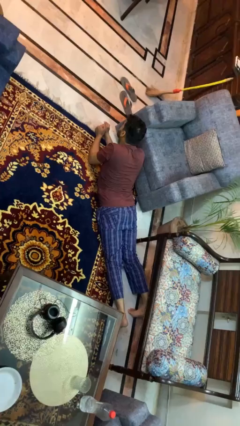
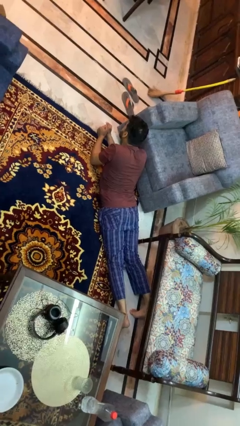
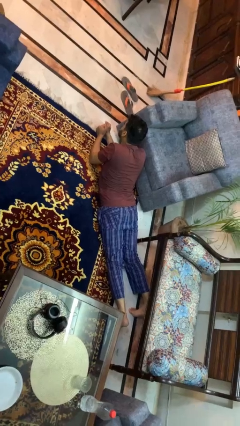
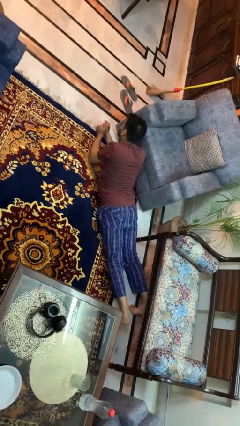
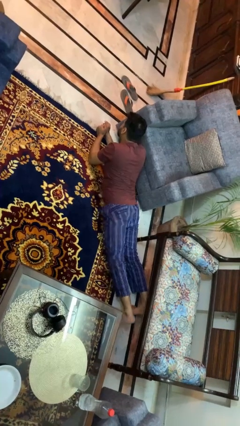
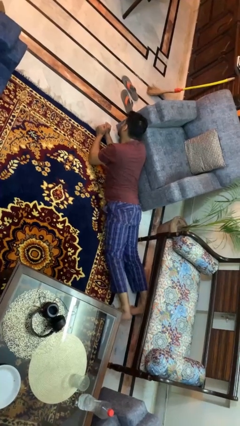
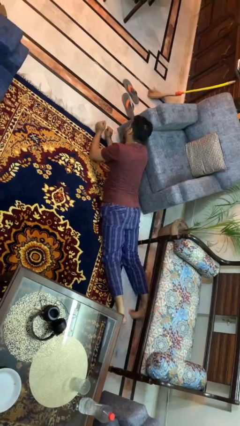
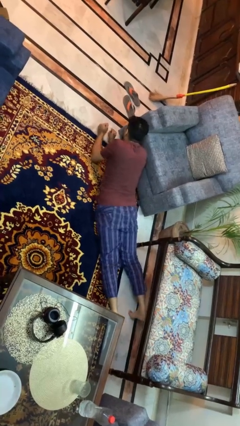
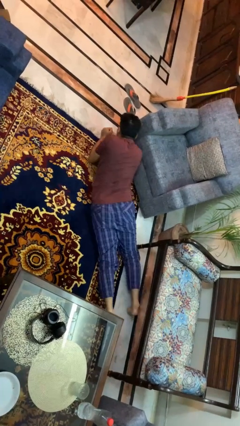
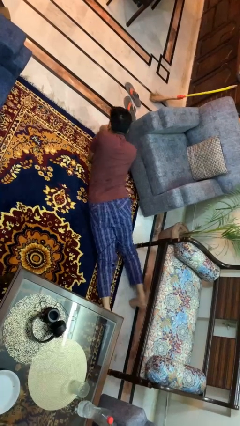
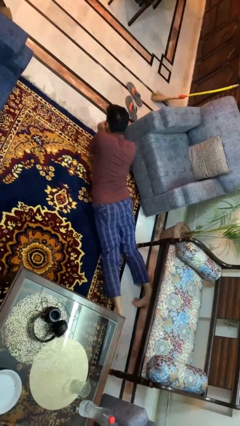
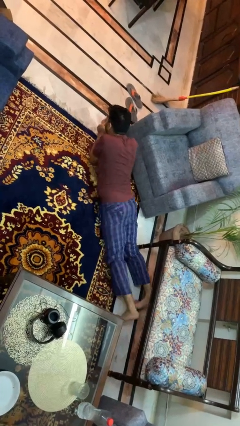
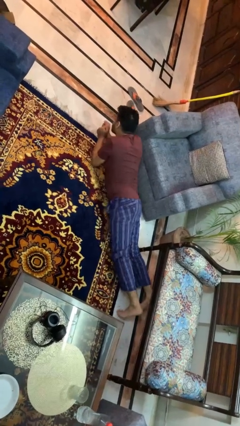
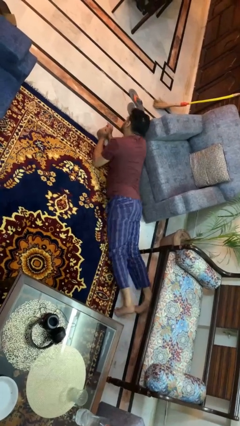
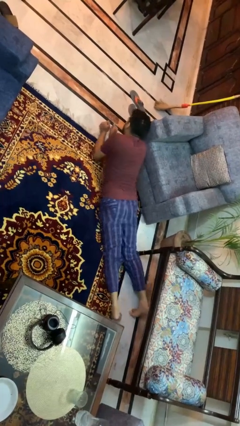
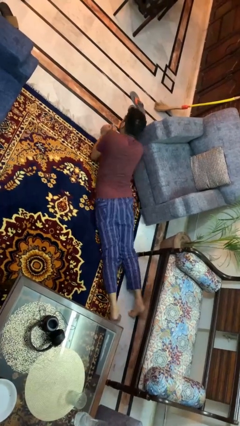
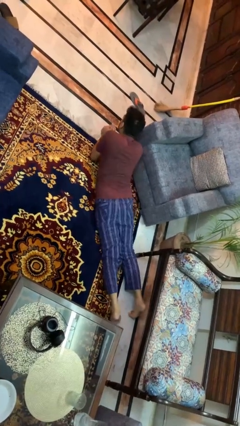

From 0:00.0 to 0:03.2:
person crawls

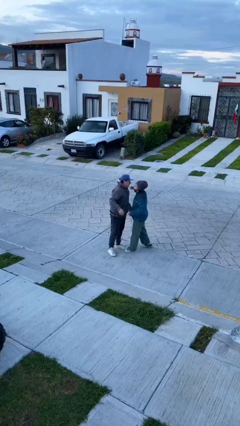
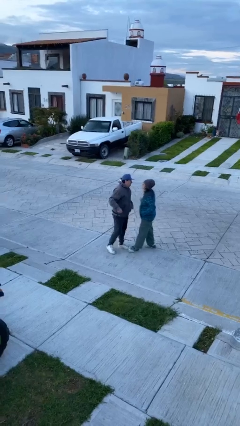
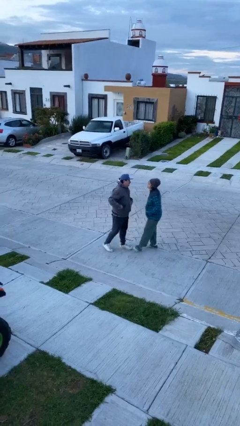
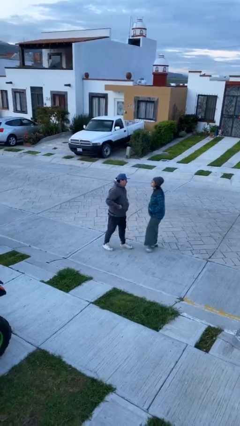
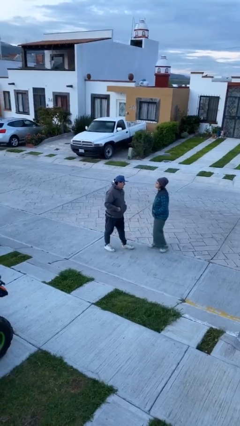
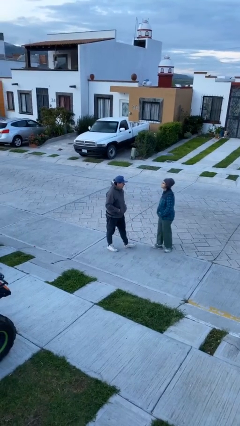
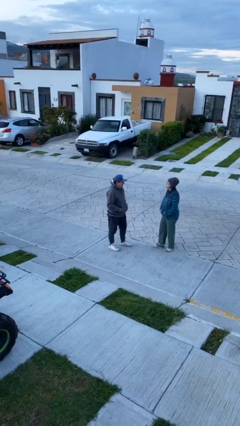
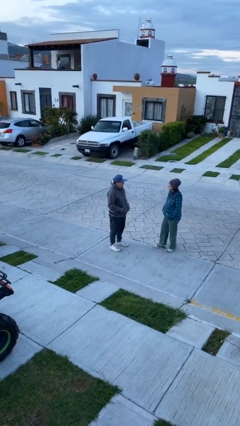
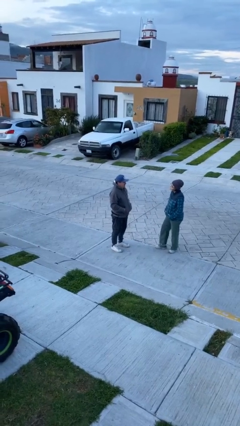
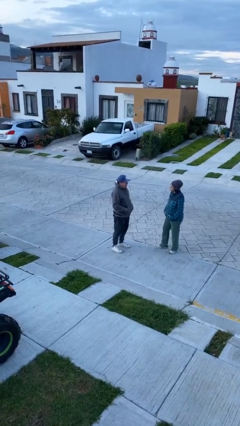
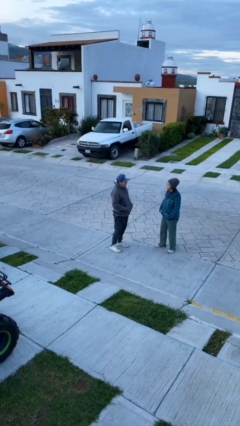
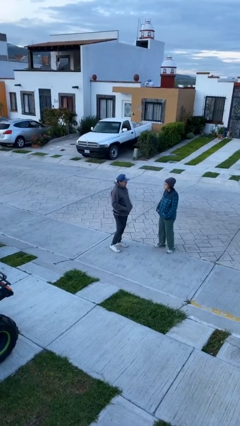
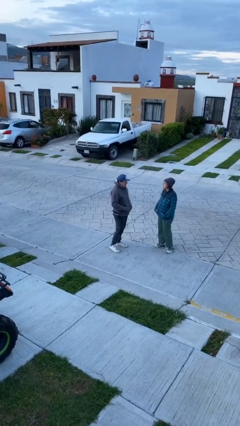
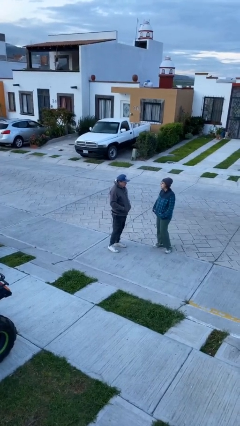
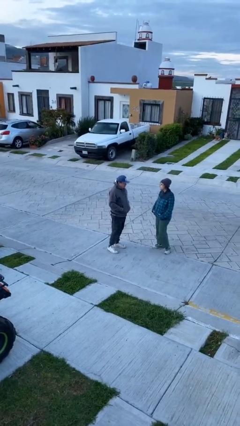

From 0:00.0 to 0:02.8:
person talks to person

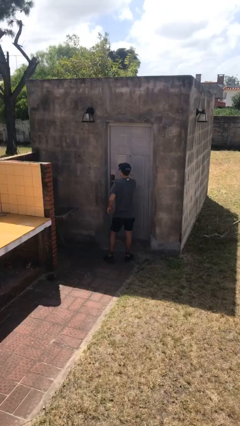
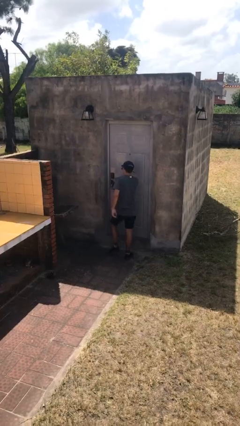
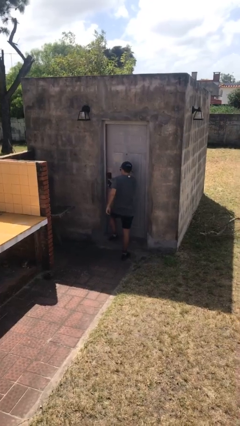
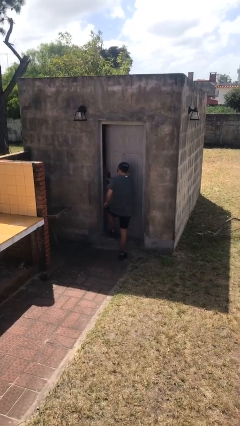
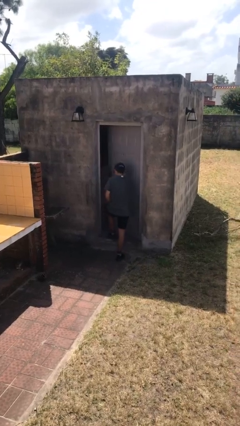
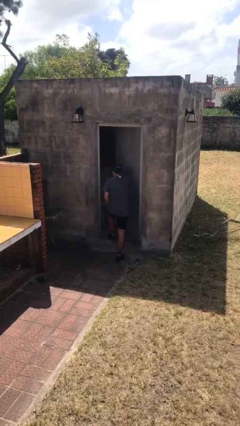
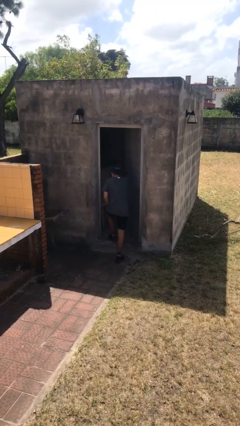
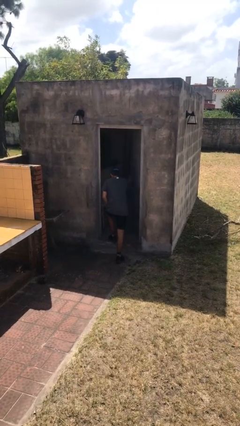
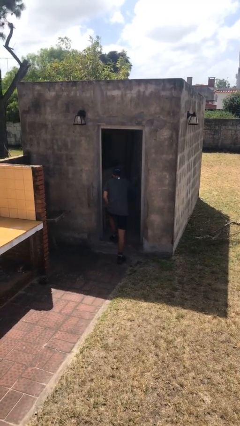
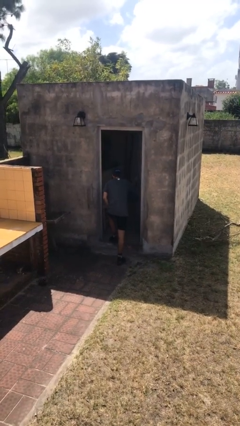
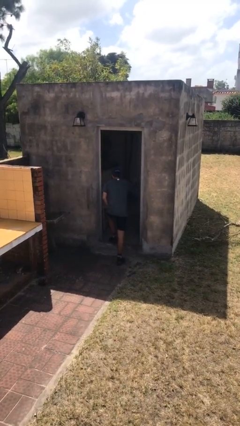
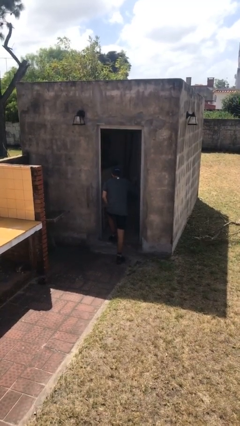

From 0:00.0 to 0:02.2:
person opens facility door

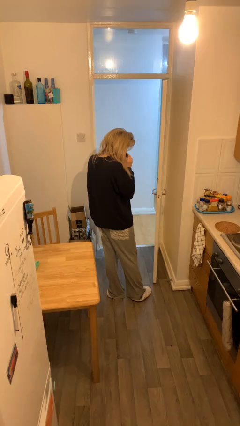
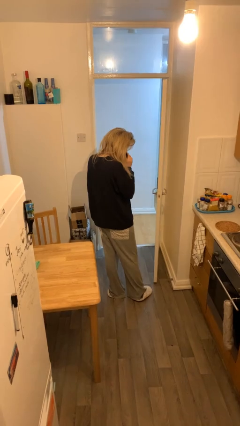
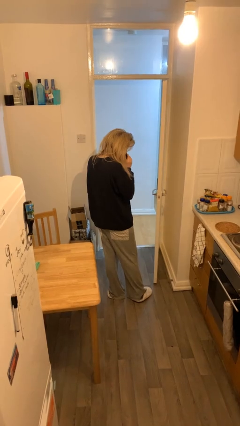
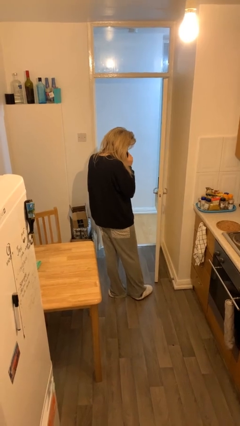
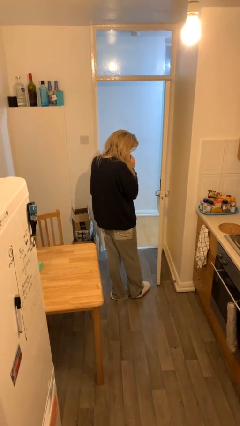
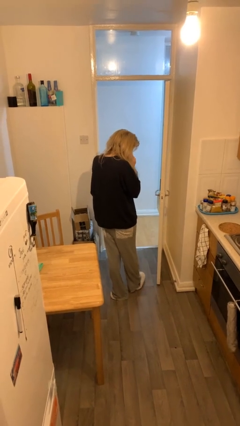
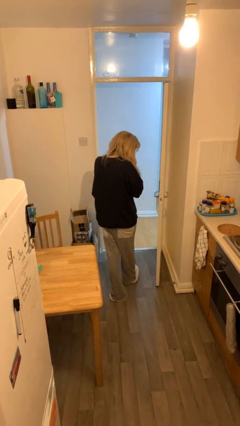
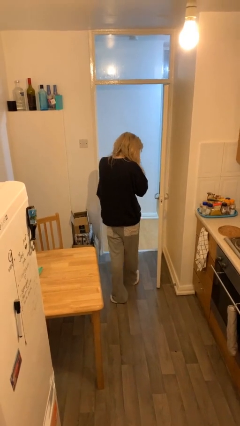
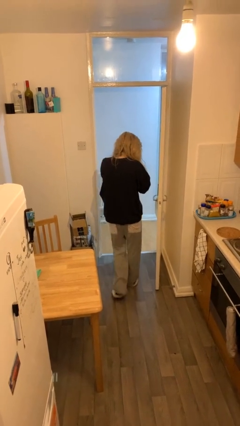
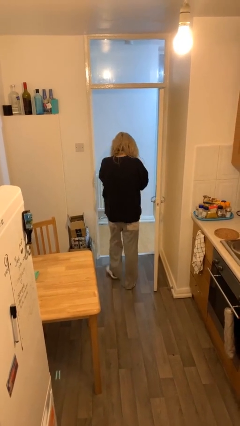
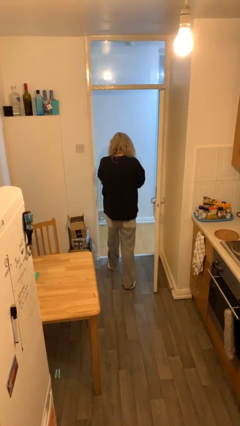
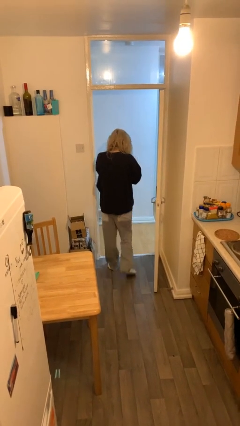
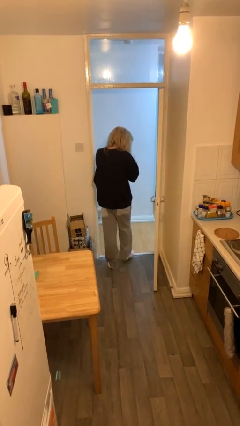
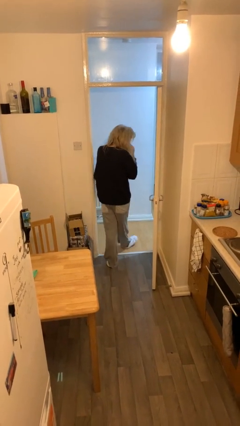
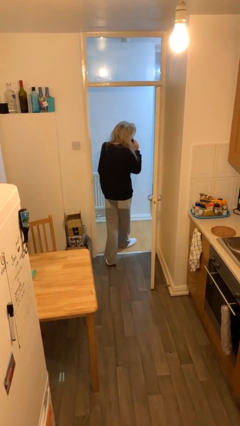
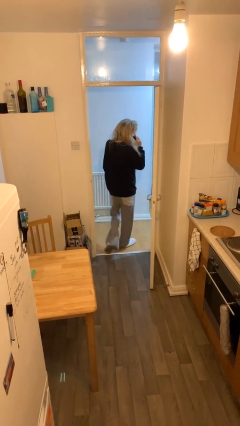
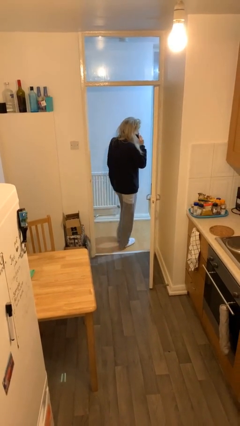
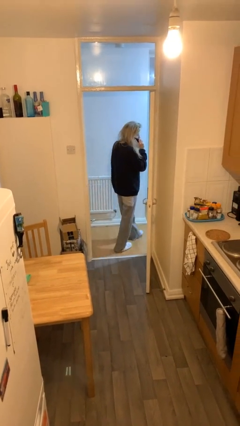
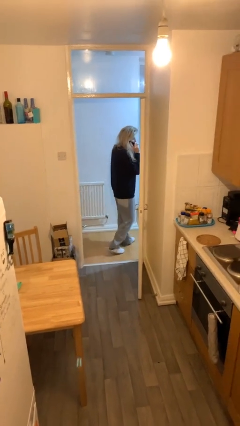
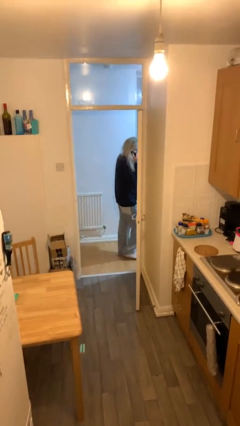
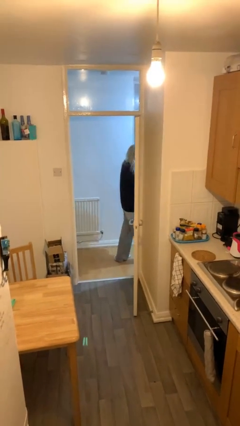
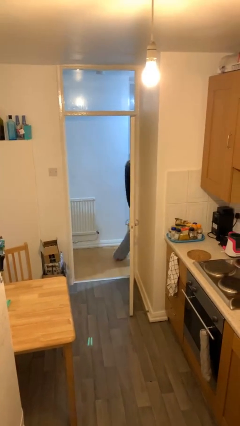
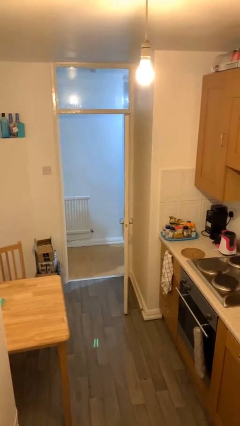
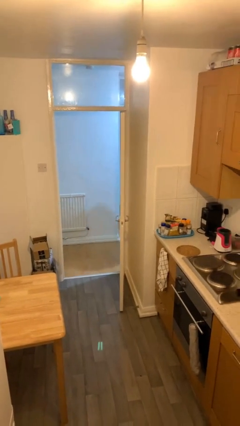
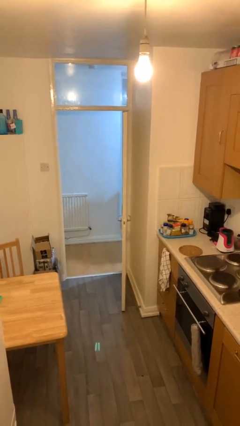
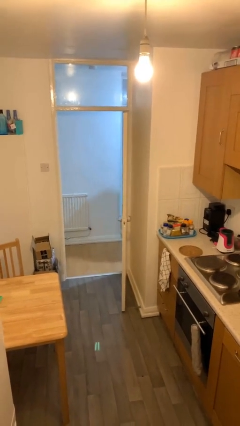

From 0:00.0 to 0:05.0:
person exits scene through structure

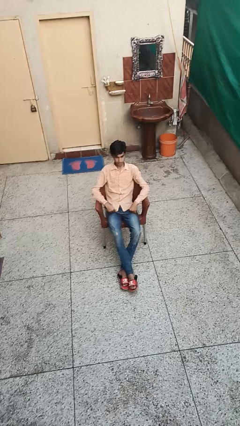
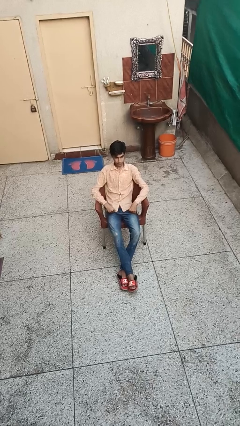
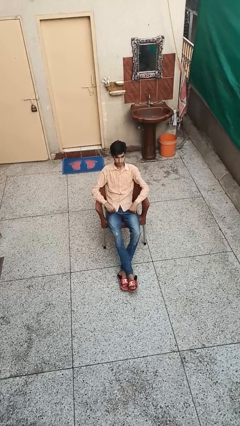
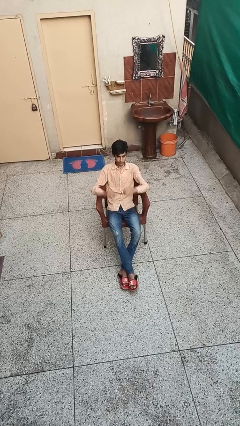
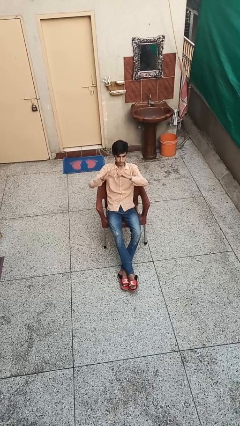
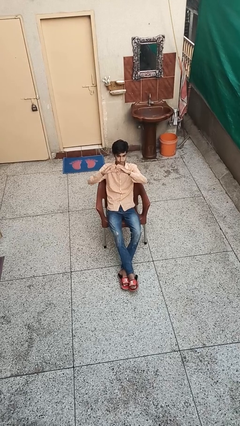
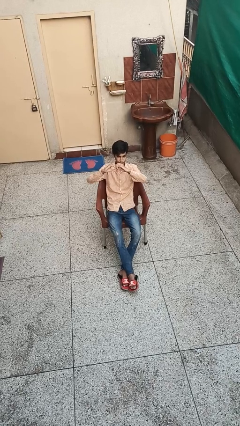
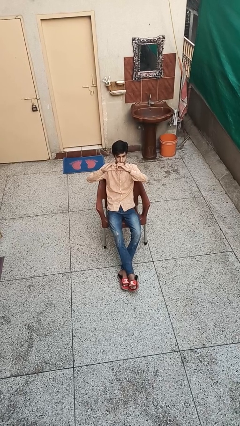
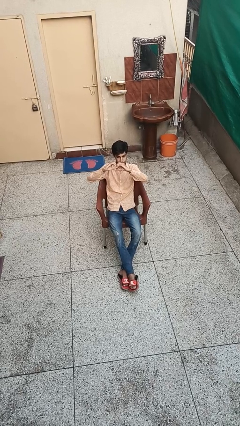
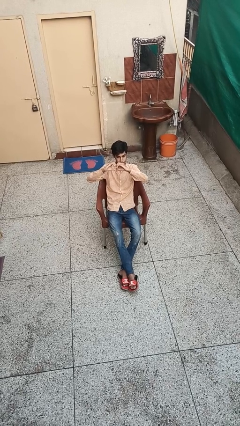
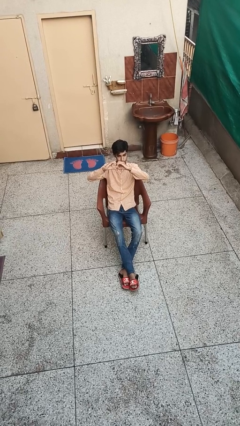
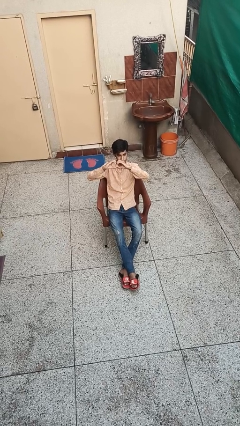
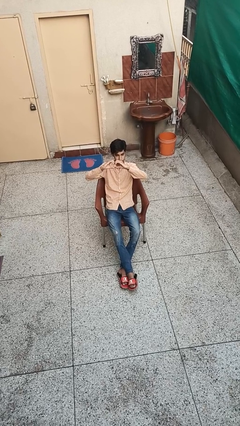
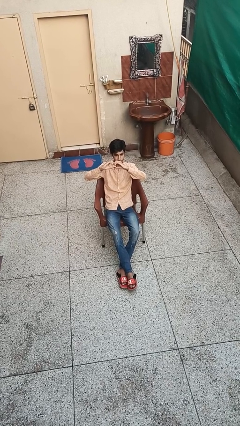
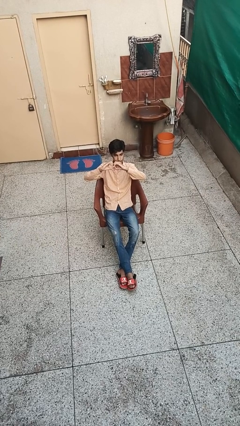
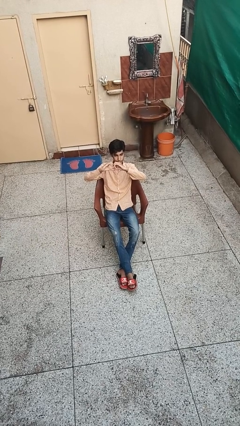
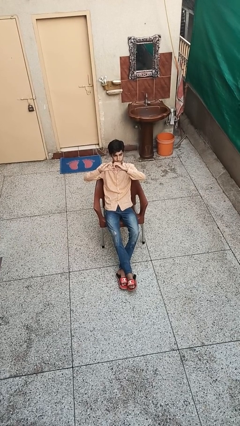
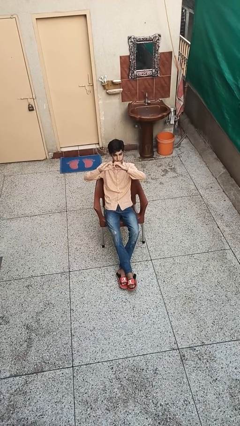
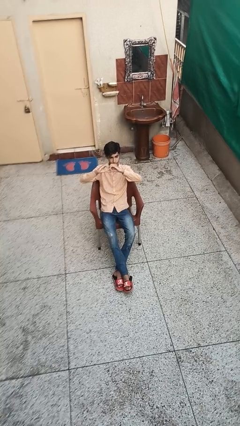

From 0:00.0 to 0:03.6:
person gestures heart

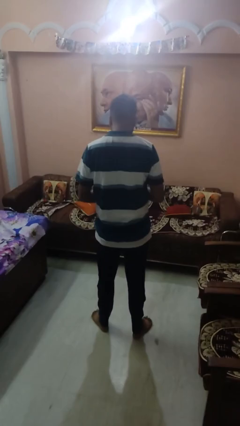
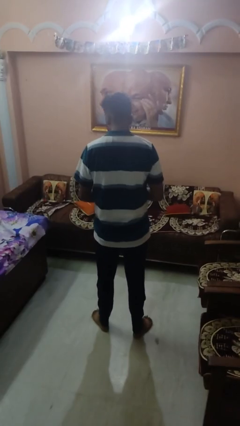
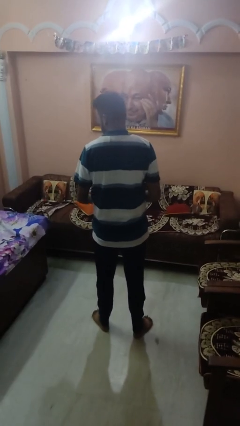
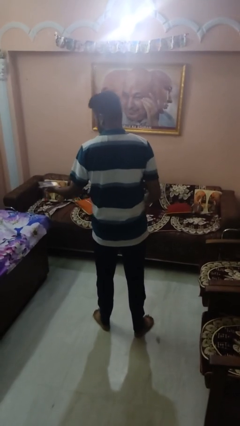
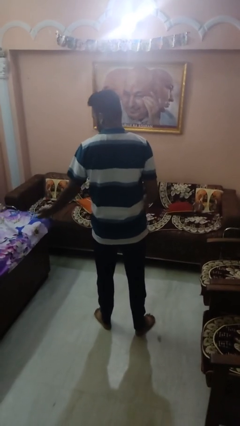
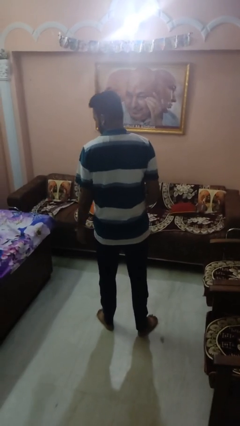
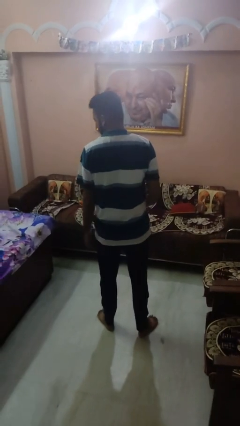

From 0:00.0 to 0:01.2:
person throws object on bed
